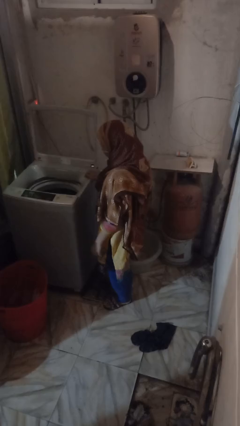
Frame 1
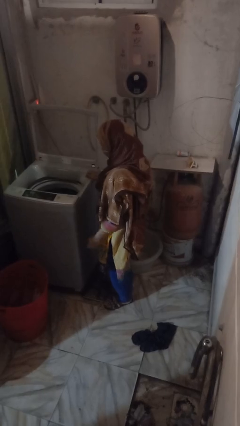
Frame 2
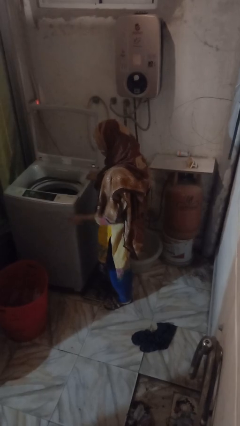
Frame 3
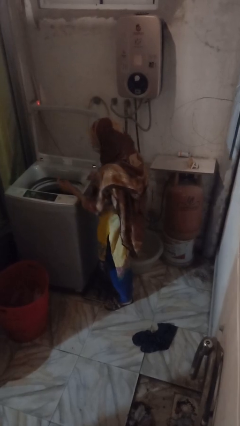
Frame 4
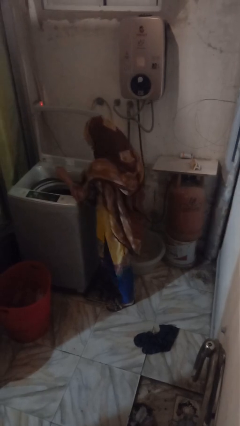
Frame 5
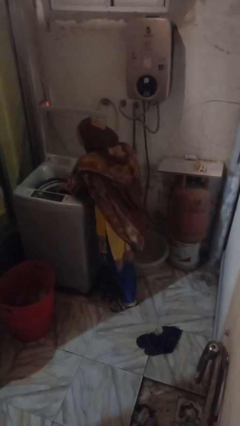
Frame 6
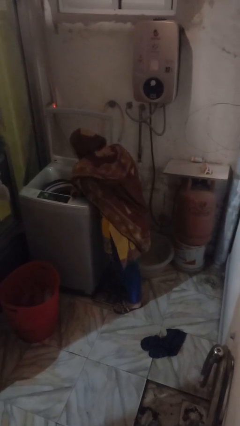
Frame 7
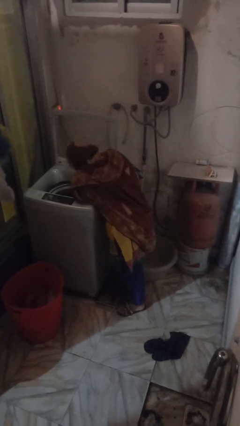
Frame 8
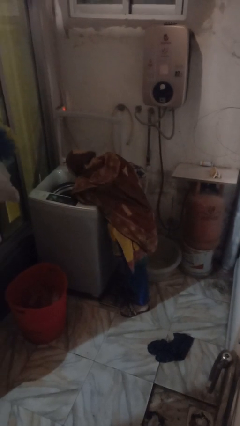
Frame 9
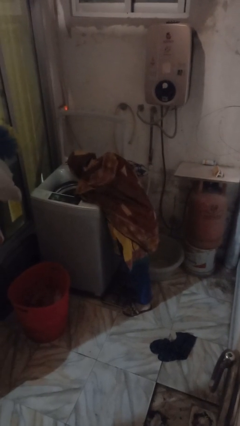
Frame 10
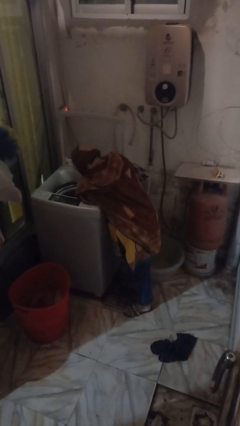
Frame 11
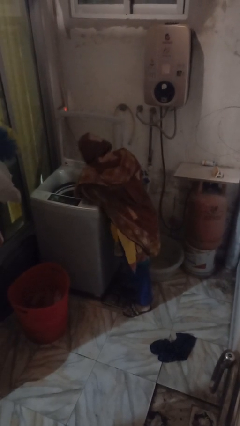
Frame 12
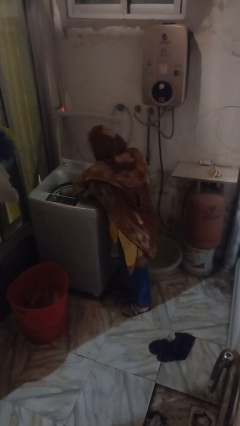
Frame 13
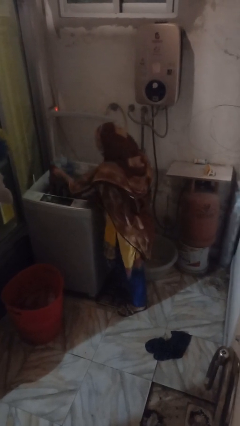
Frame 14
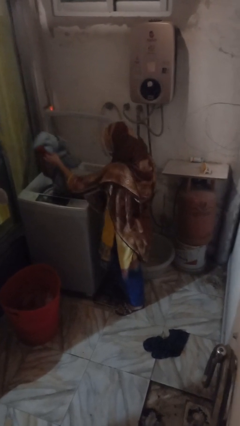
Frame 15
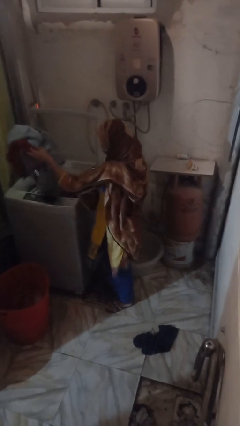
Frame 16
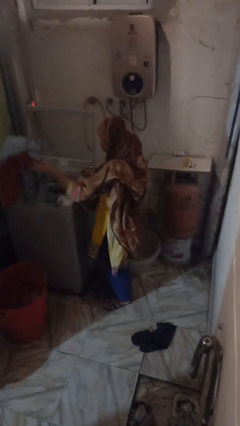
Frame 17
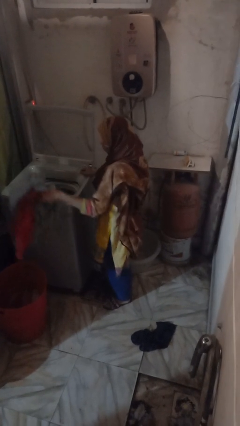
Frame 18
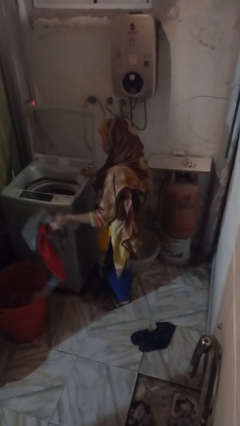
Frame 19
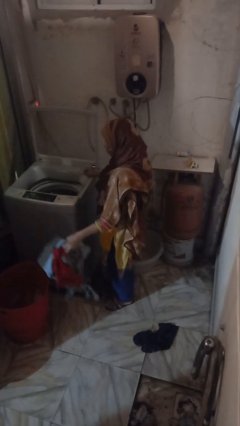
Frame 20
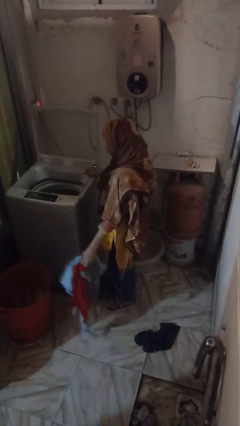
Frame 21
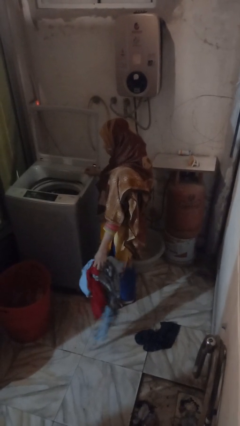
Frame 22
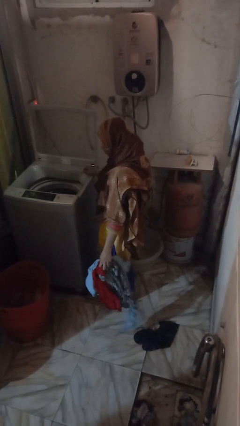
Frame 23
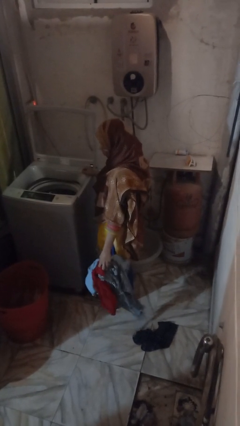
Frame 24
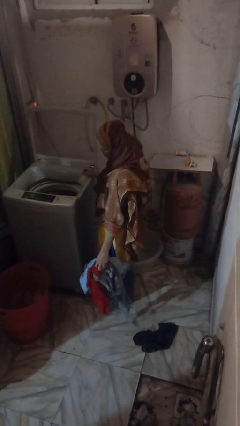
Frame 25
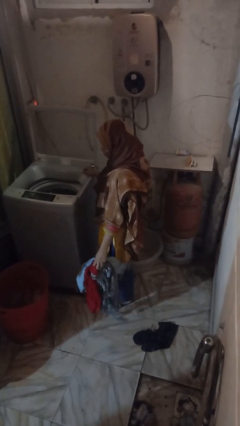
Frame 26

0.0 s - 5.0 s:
person unloads clotheswasher

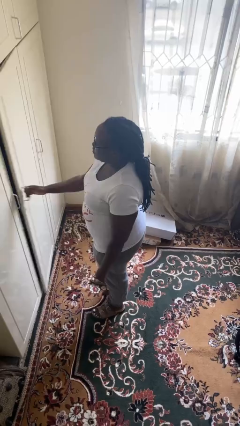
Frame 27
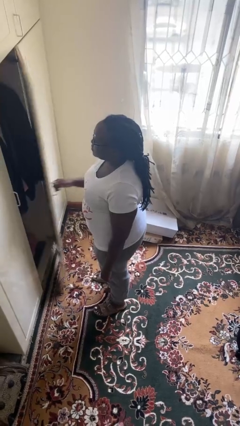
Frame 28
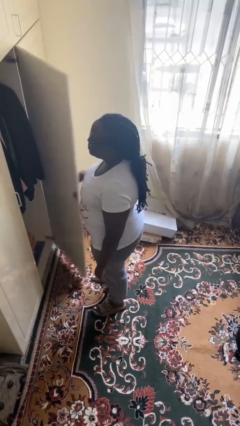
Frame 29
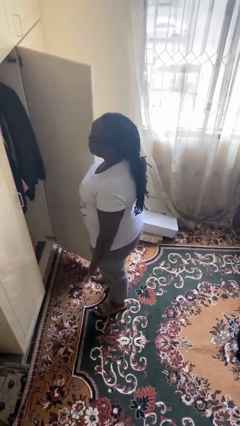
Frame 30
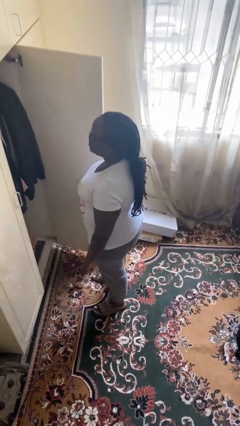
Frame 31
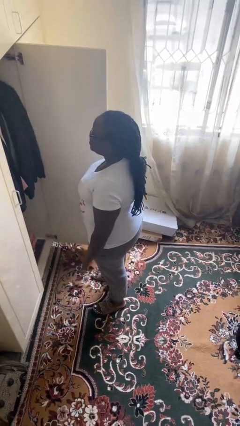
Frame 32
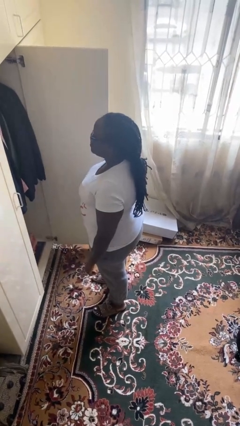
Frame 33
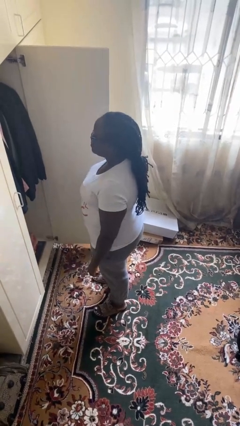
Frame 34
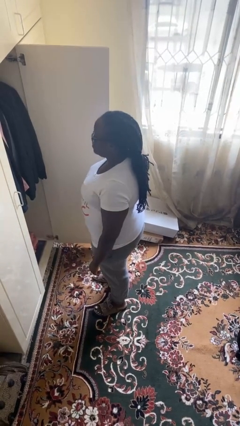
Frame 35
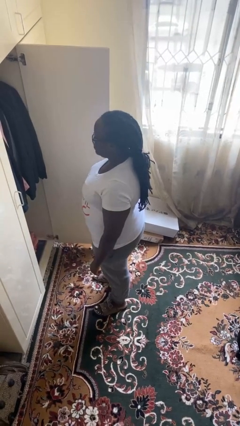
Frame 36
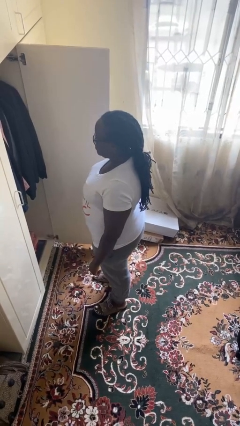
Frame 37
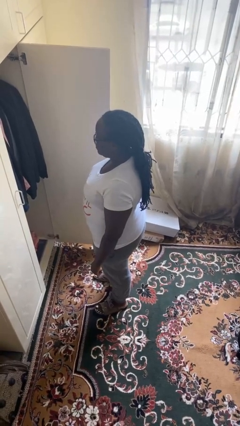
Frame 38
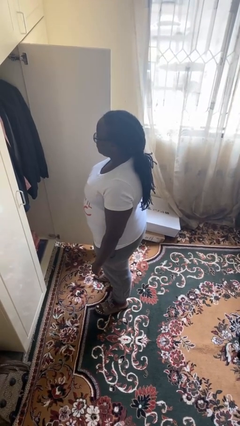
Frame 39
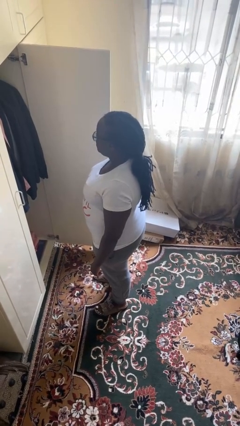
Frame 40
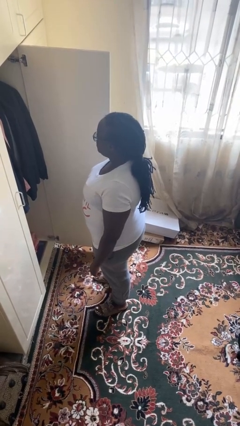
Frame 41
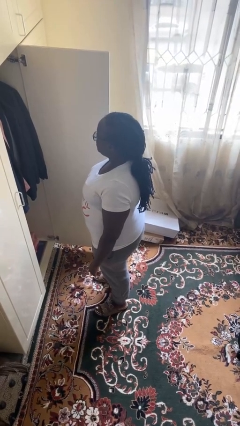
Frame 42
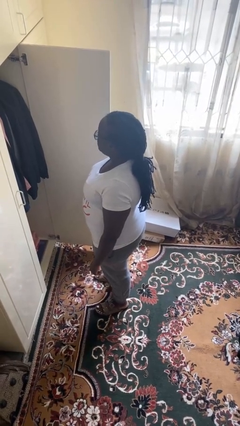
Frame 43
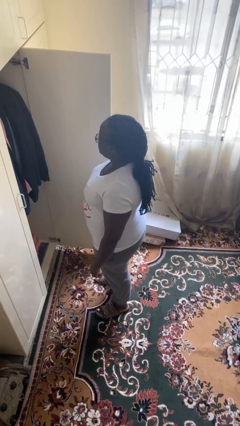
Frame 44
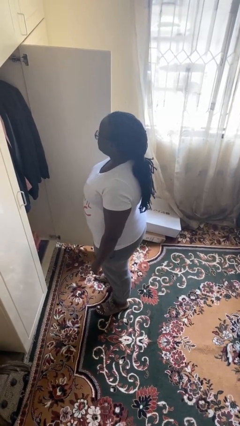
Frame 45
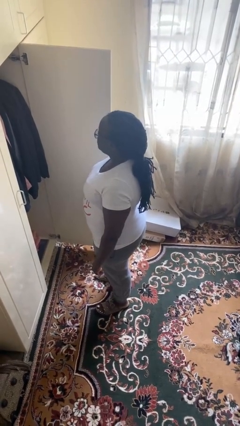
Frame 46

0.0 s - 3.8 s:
person opens closet door

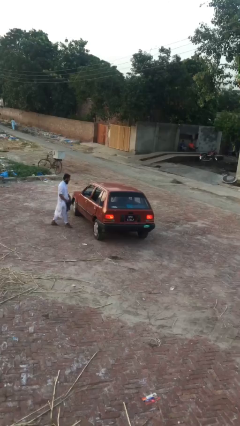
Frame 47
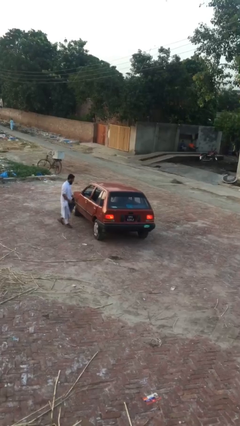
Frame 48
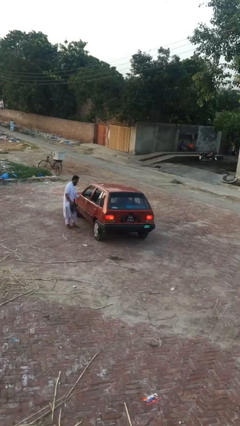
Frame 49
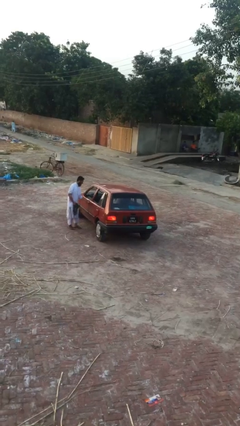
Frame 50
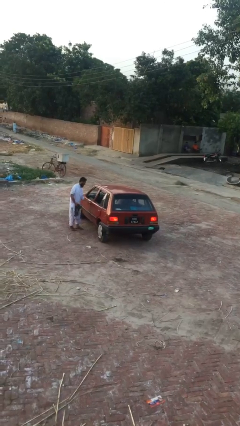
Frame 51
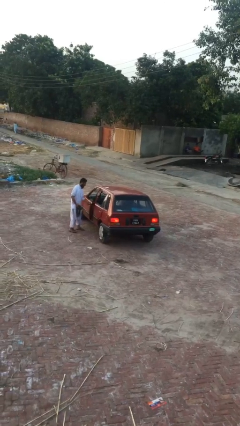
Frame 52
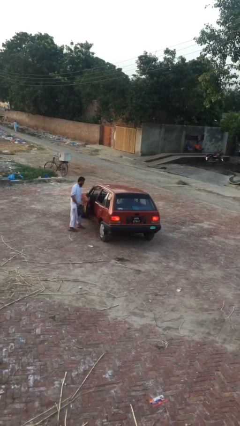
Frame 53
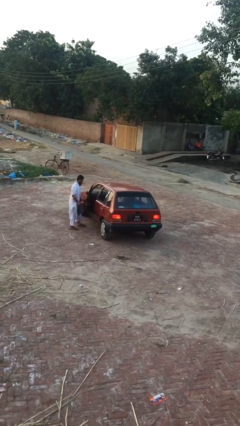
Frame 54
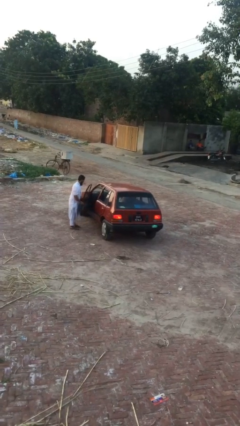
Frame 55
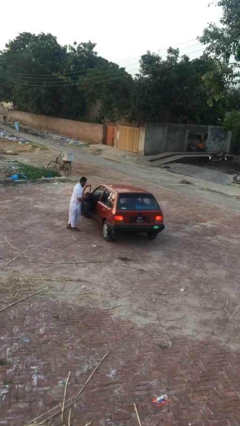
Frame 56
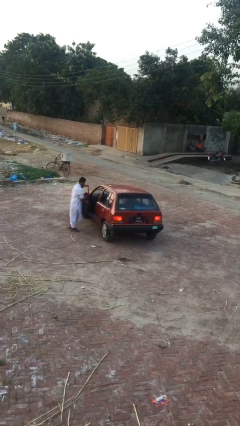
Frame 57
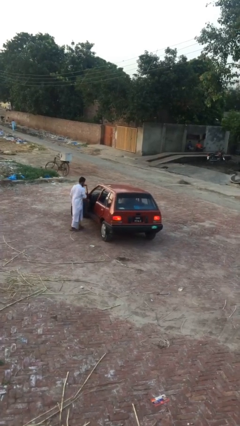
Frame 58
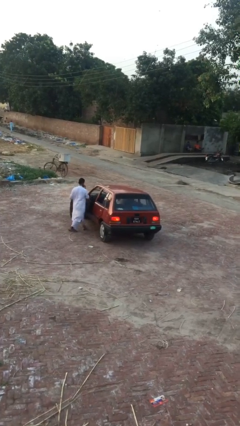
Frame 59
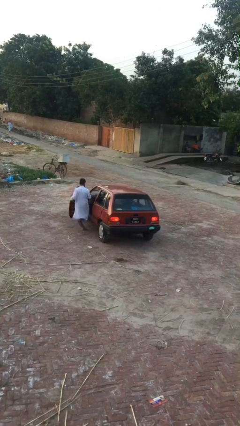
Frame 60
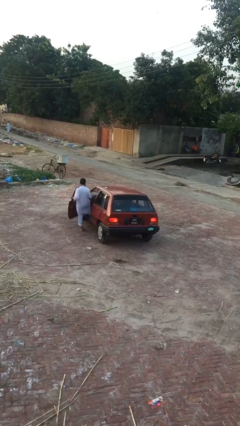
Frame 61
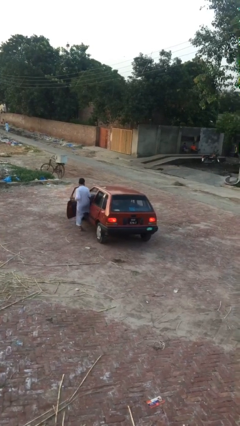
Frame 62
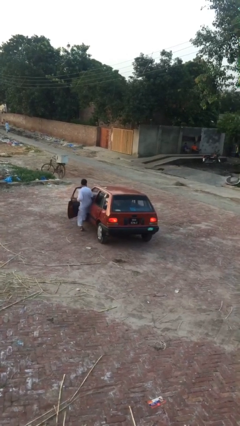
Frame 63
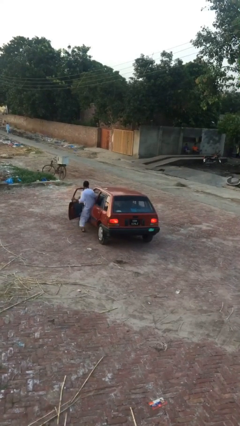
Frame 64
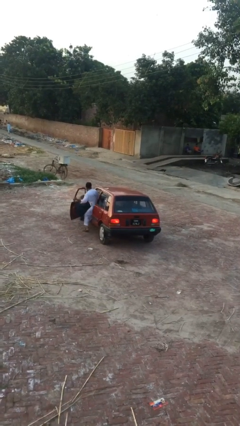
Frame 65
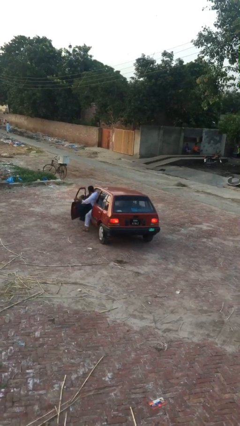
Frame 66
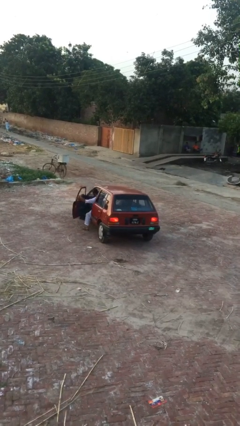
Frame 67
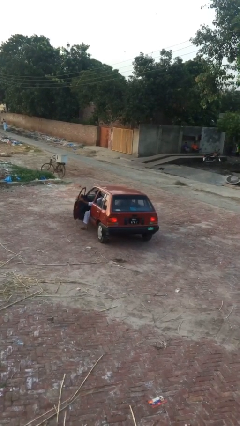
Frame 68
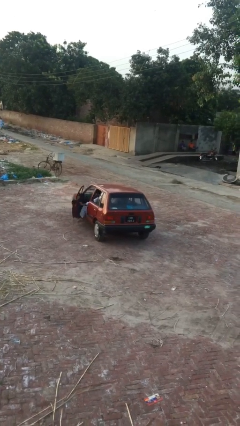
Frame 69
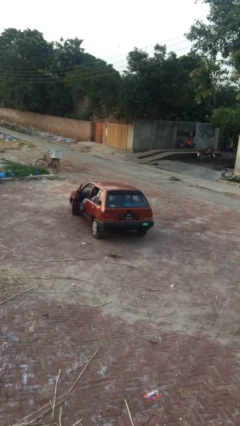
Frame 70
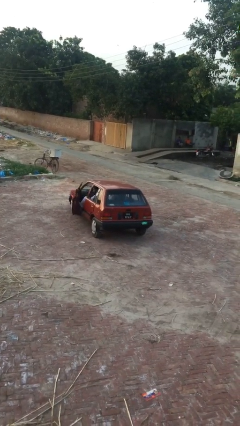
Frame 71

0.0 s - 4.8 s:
car picks up person

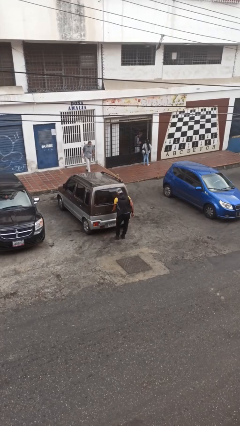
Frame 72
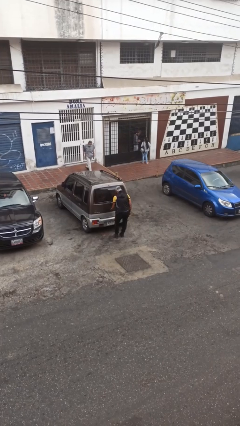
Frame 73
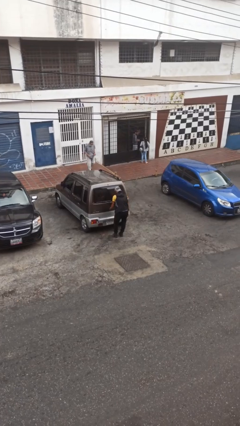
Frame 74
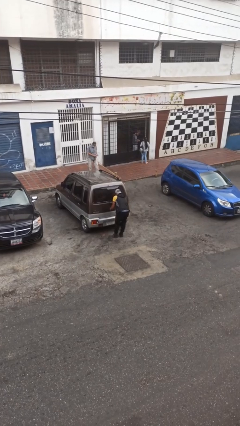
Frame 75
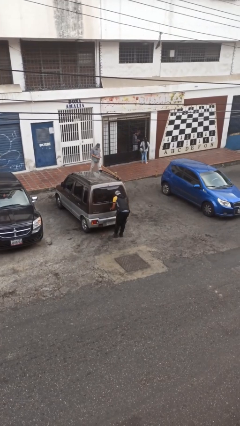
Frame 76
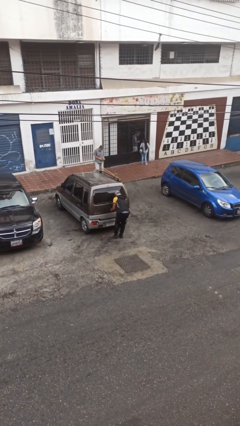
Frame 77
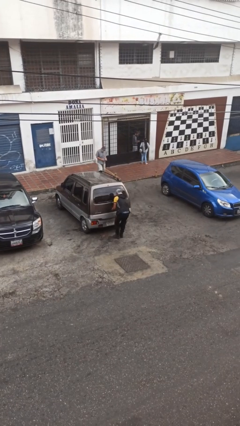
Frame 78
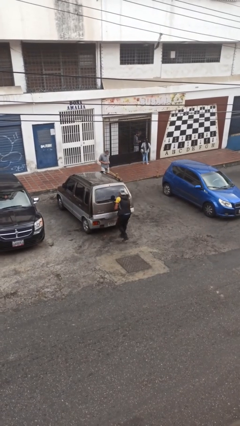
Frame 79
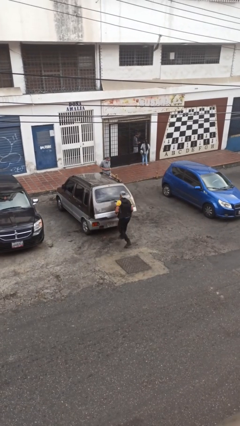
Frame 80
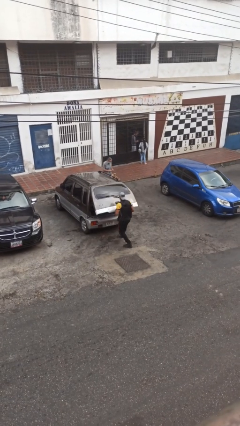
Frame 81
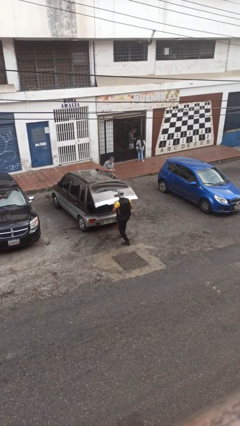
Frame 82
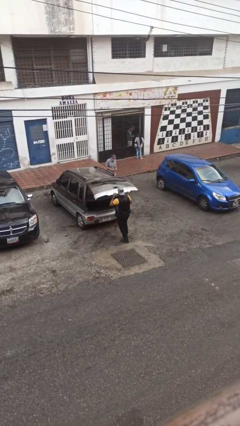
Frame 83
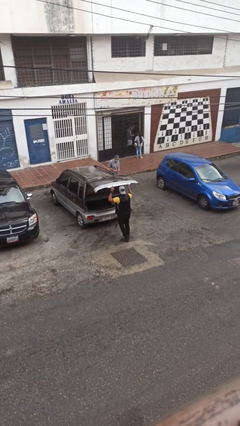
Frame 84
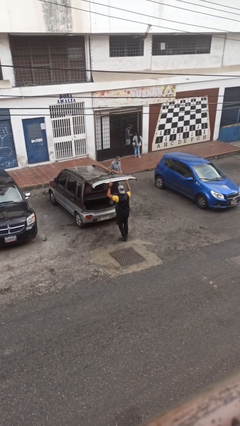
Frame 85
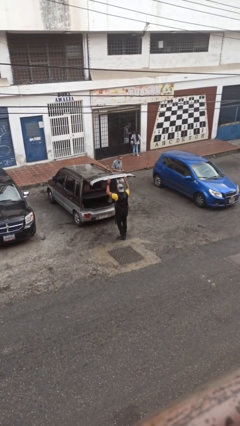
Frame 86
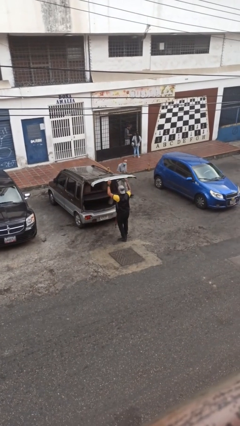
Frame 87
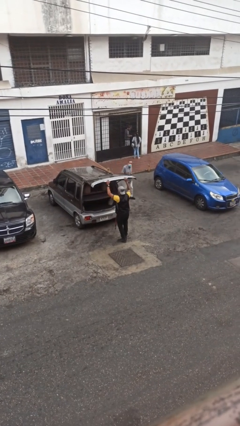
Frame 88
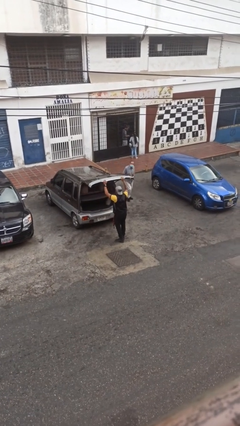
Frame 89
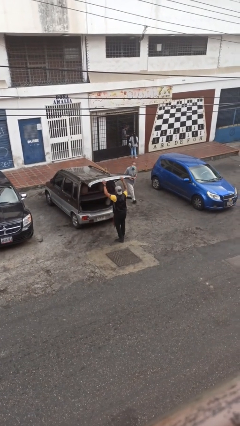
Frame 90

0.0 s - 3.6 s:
person opens car trunk

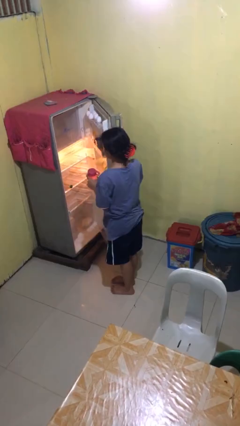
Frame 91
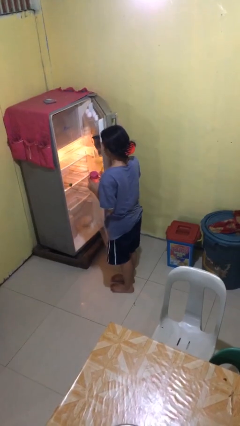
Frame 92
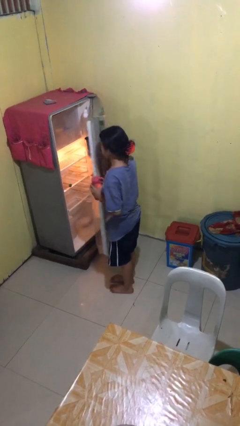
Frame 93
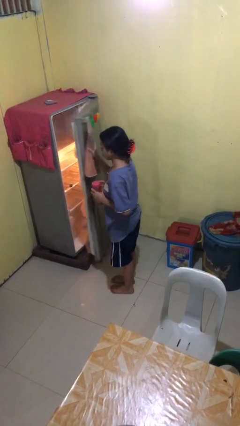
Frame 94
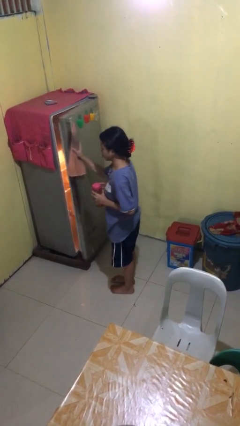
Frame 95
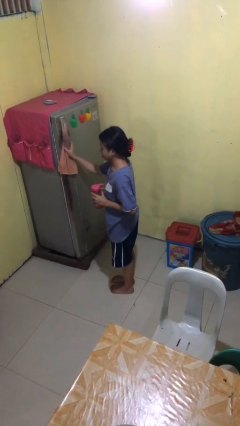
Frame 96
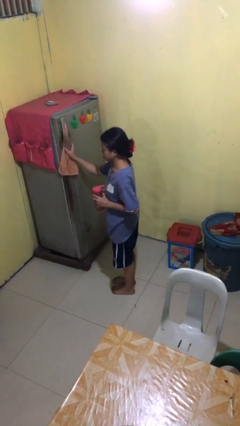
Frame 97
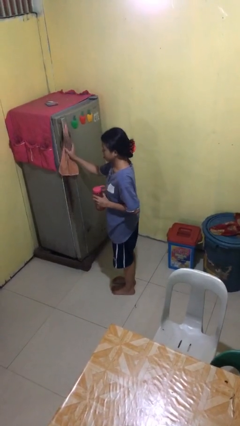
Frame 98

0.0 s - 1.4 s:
person closes refrigerator
